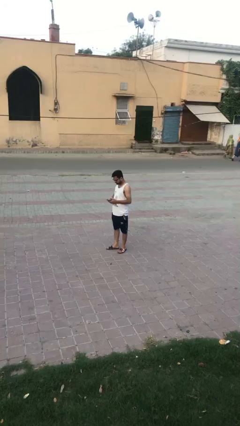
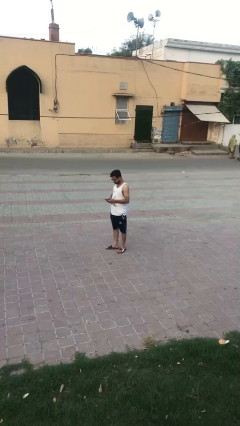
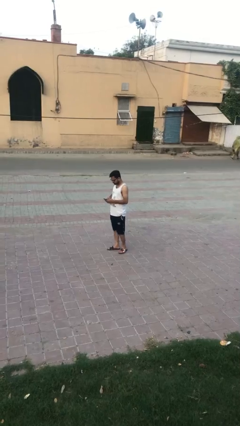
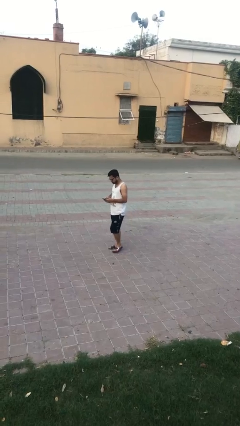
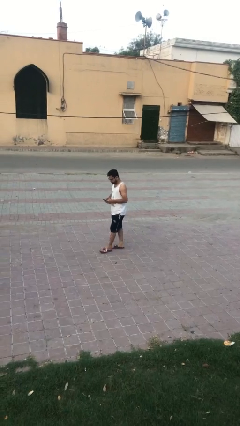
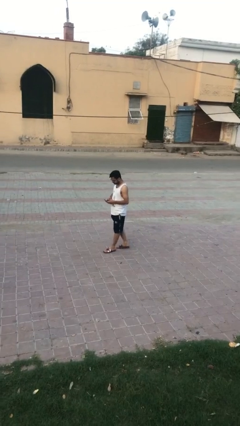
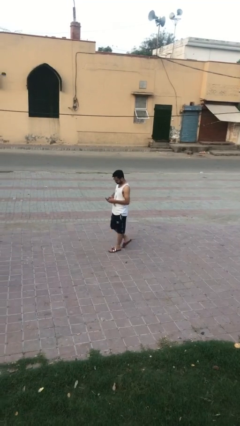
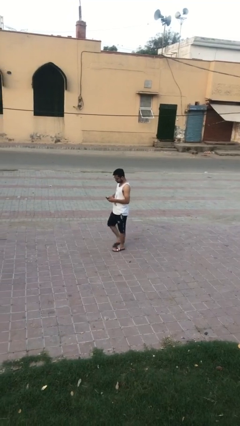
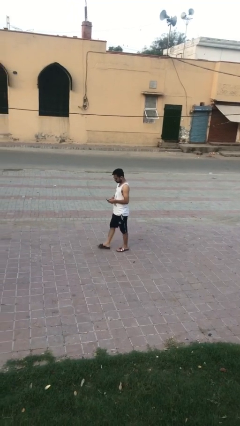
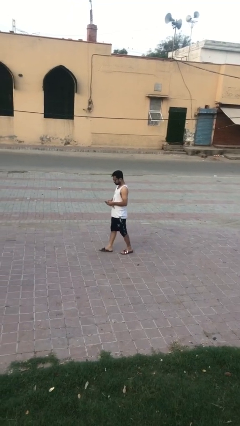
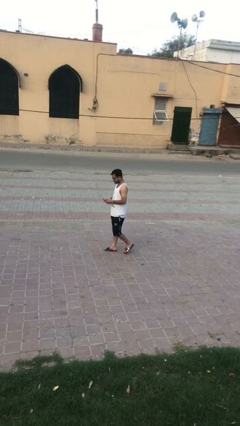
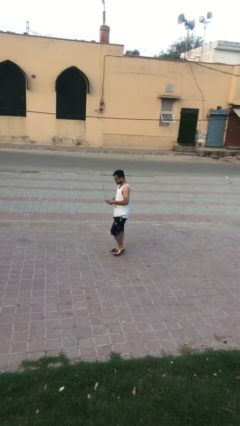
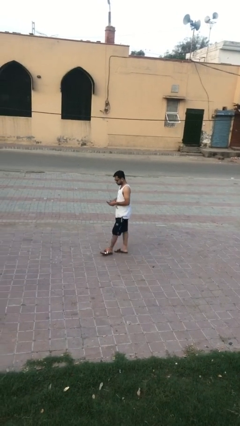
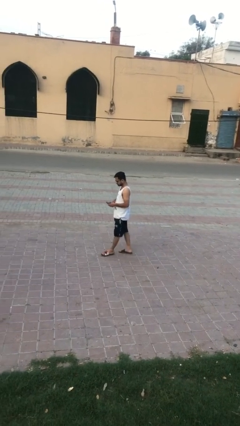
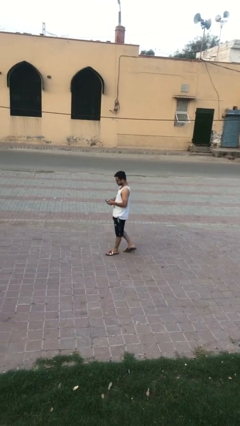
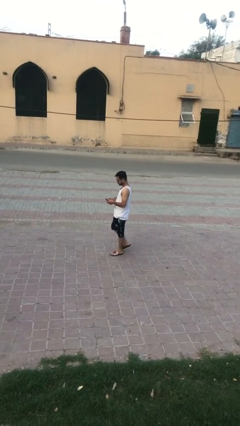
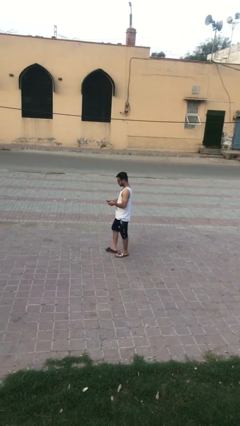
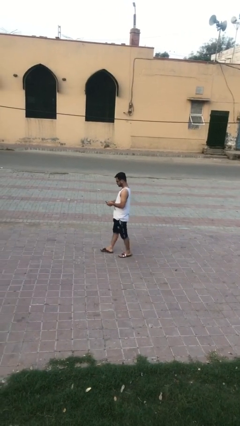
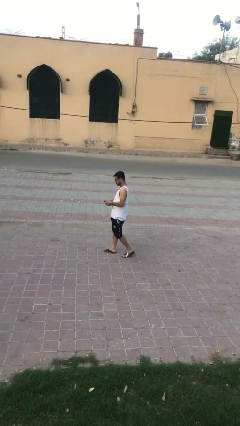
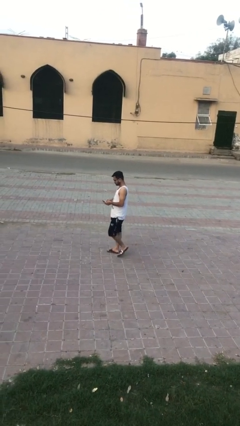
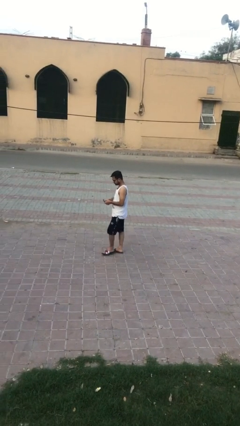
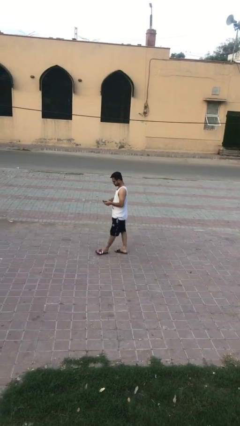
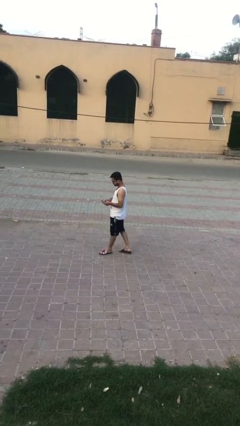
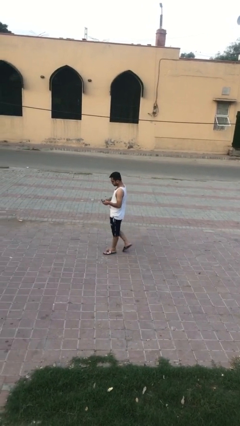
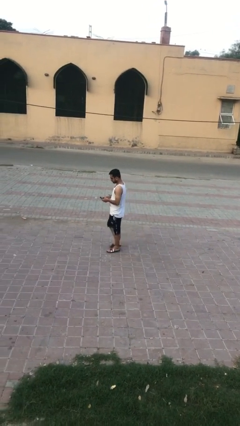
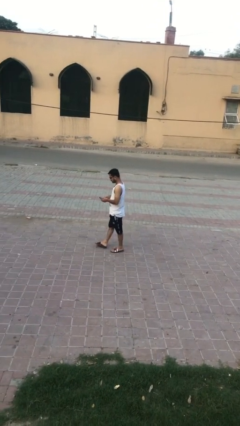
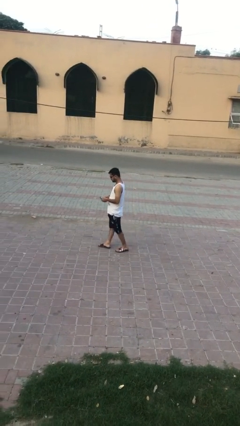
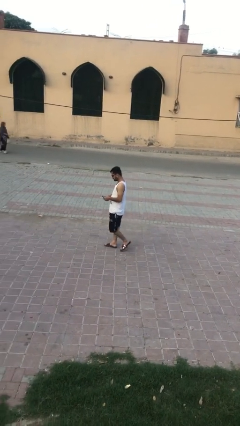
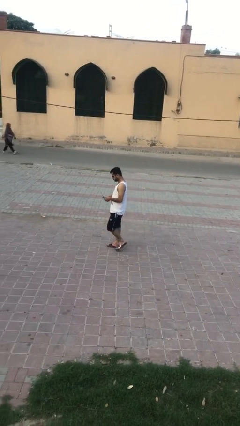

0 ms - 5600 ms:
person texts on phone

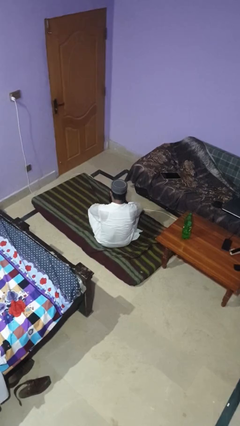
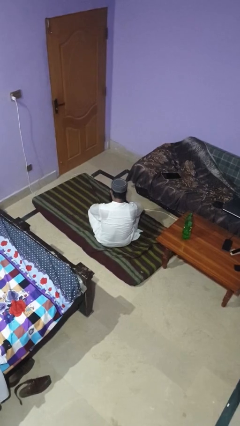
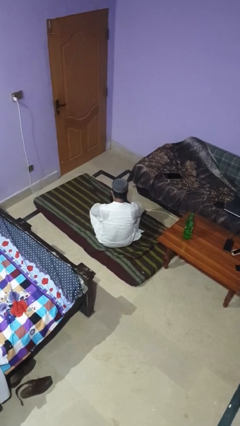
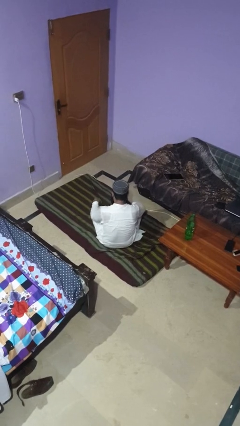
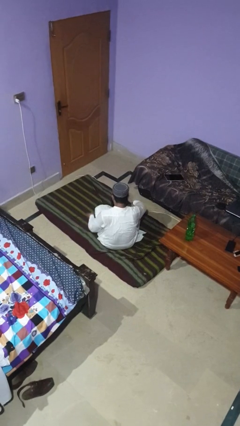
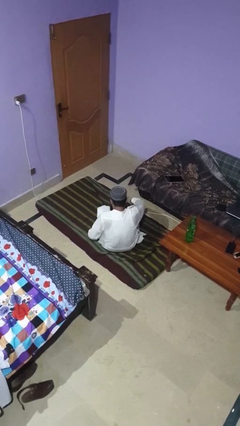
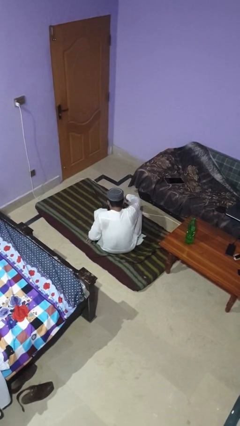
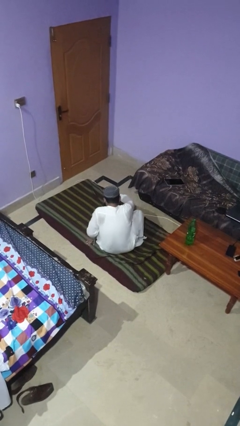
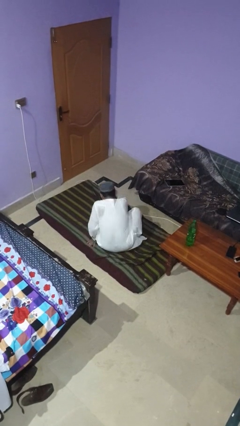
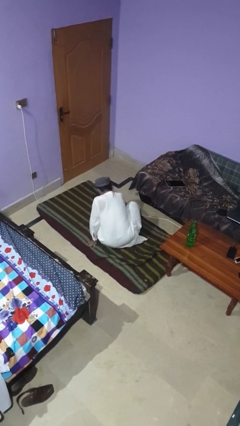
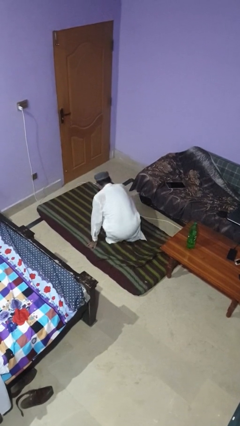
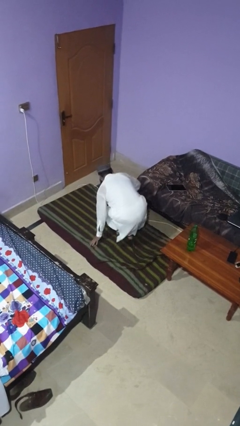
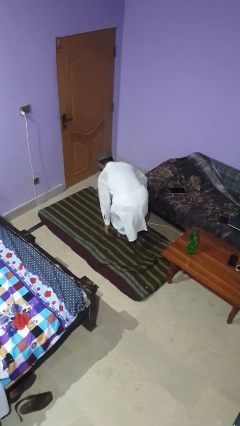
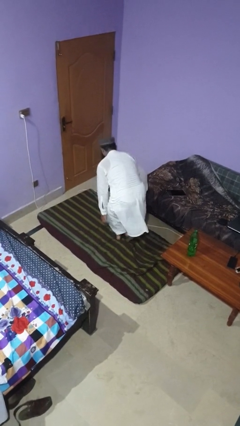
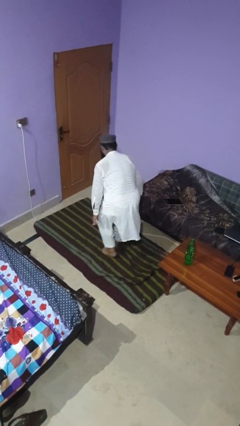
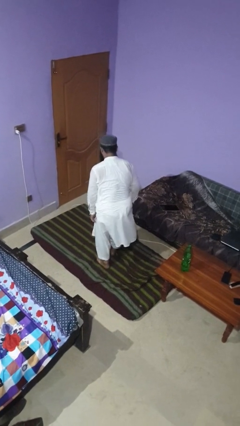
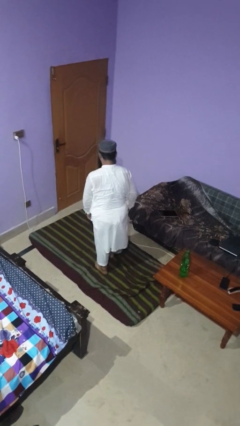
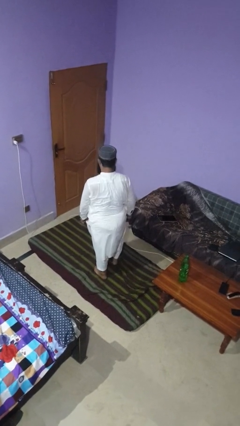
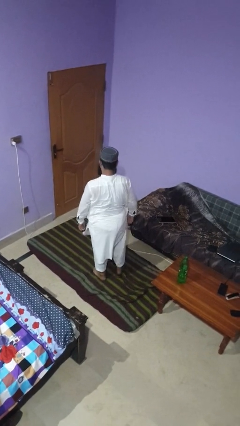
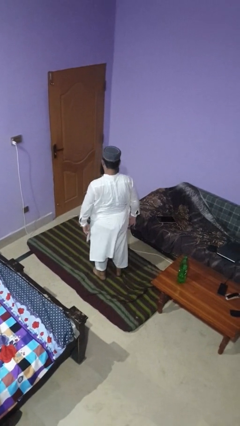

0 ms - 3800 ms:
person stands up from floor

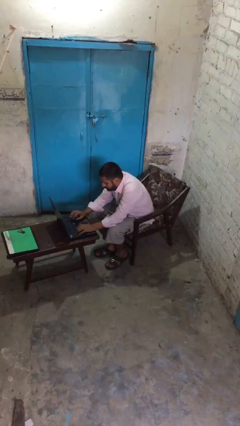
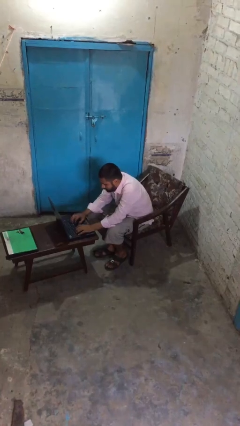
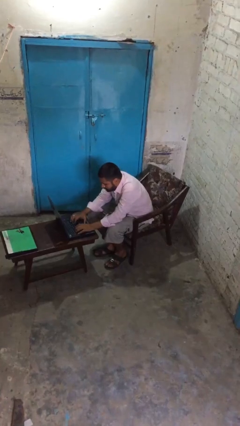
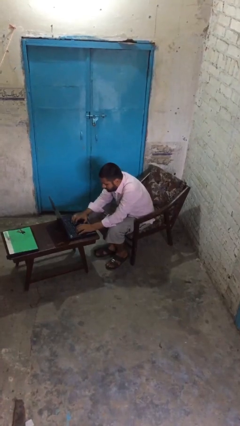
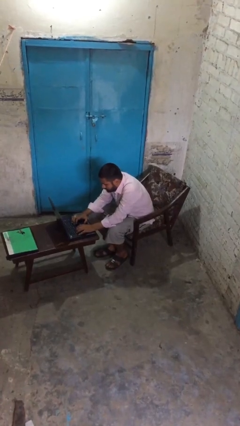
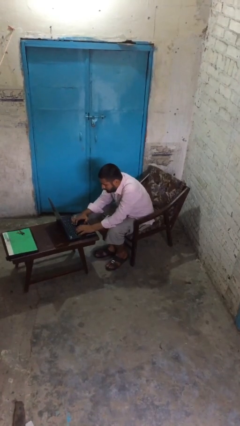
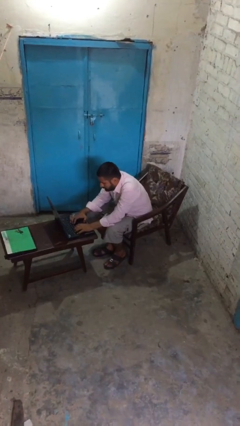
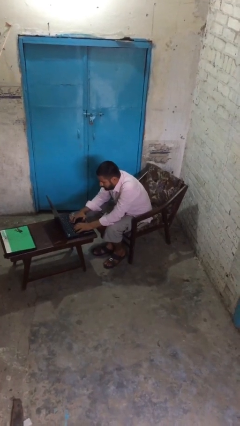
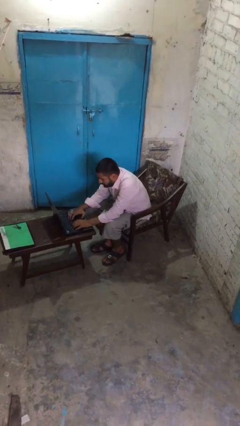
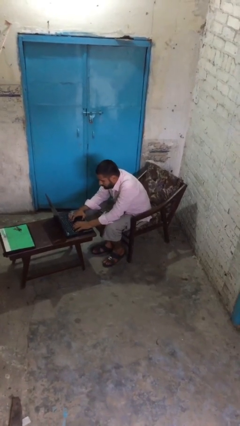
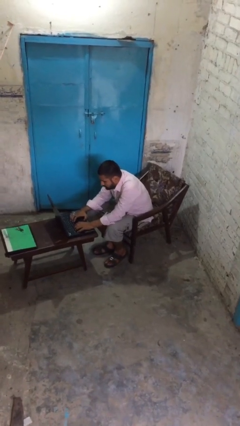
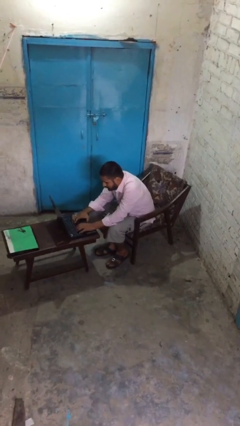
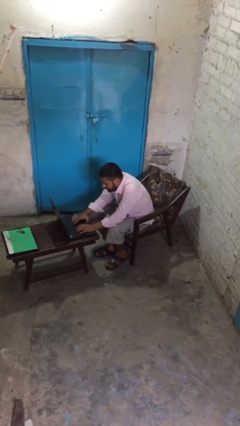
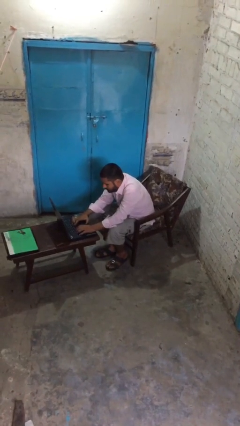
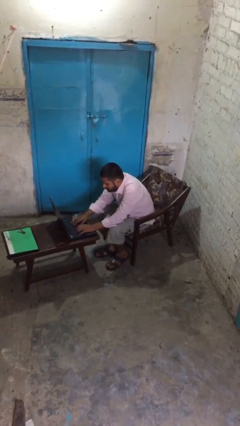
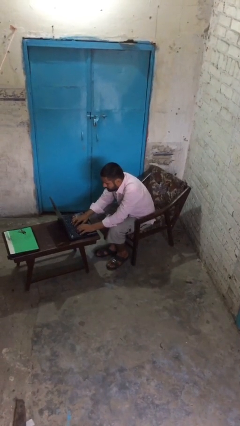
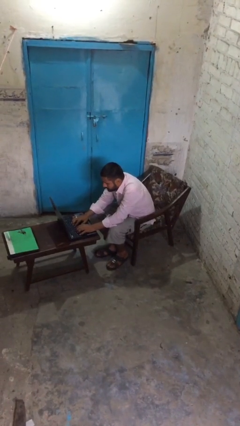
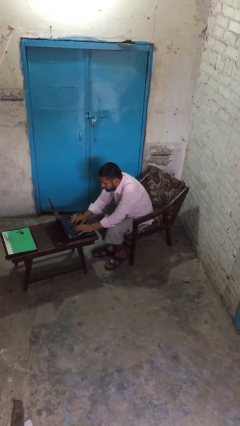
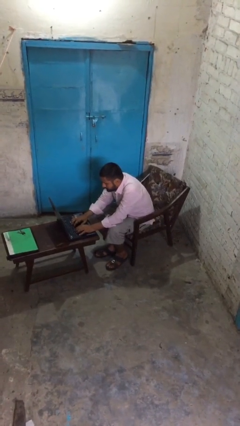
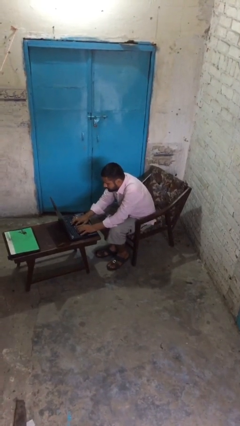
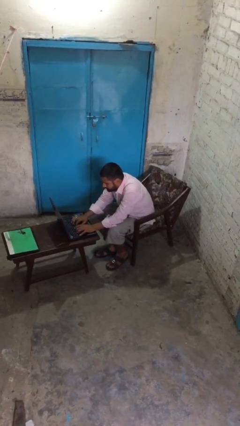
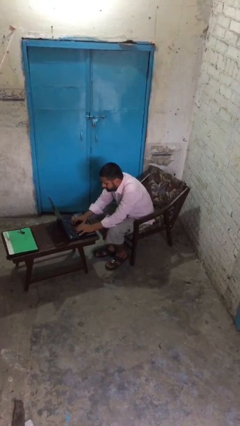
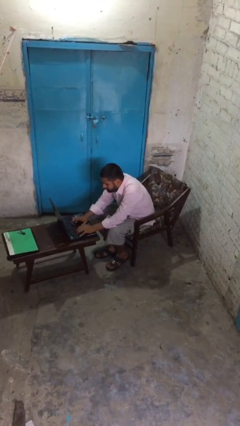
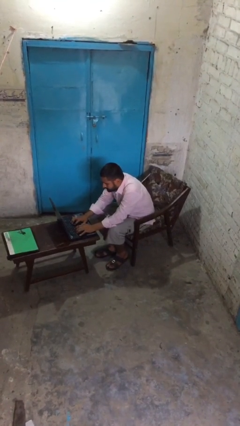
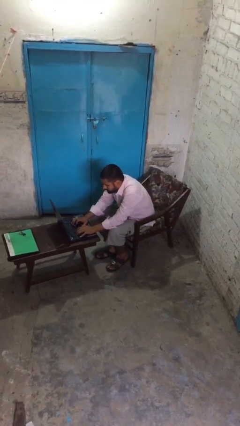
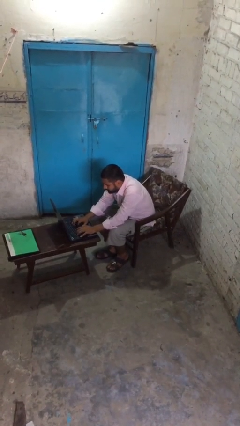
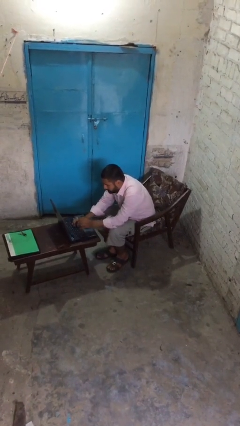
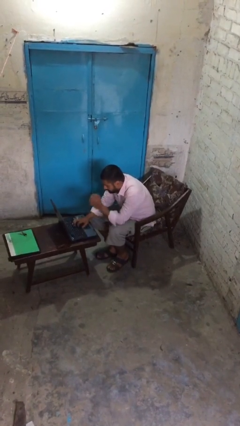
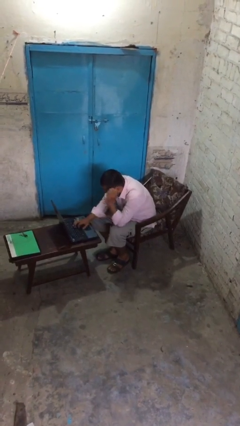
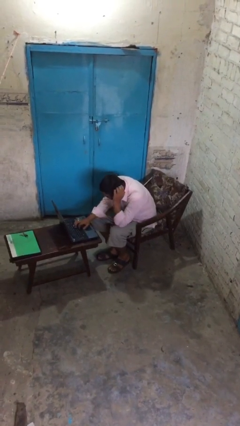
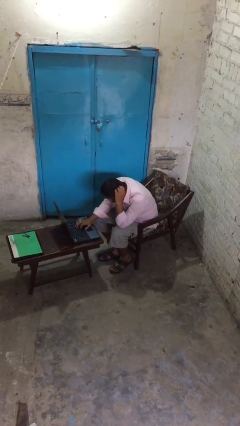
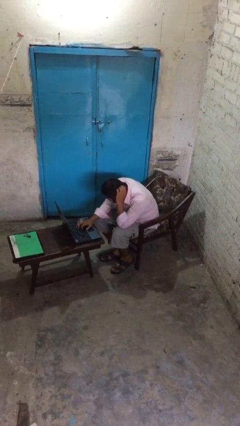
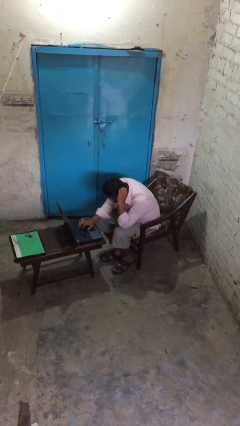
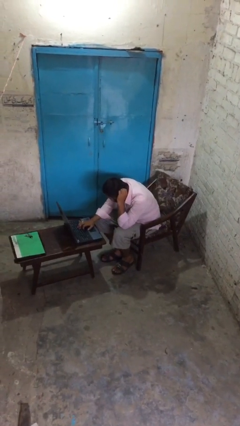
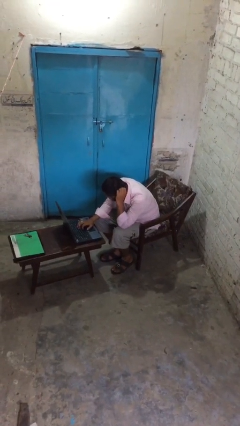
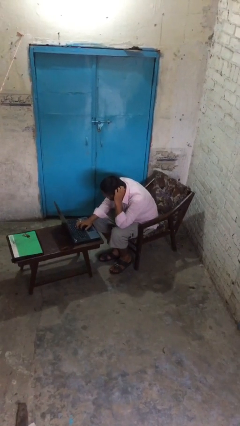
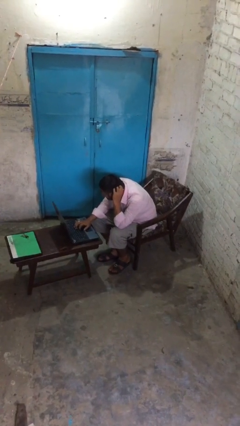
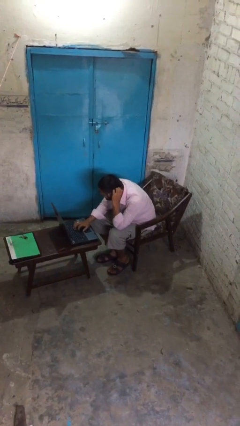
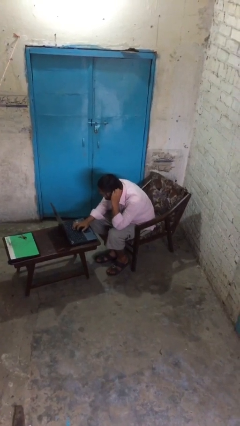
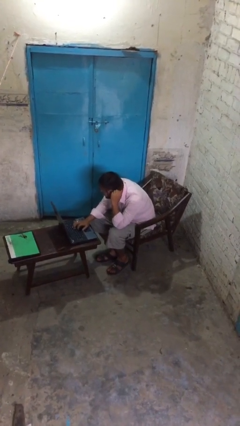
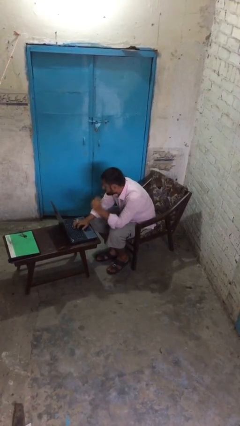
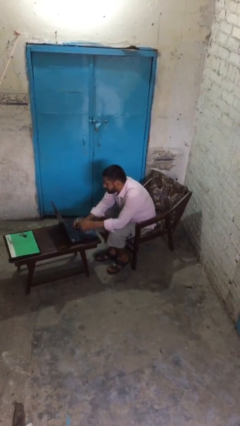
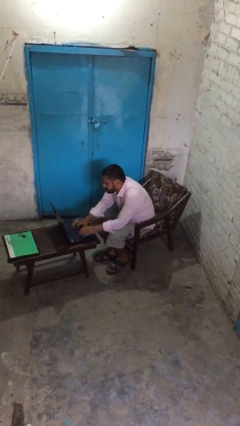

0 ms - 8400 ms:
person interacts with laptop
